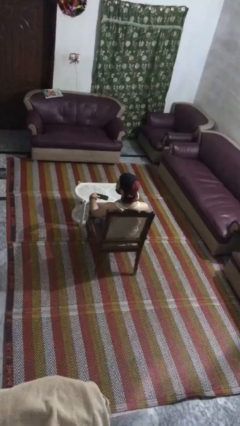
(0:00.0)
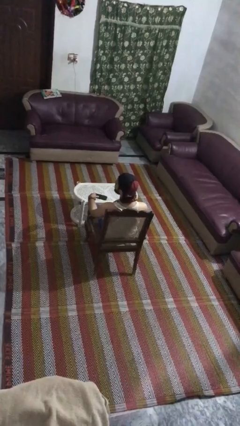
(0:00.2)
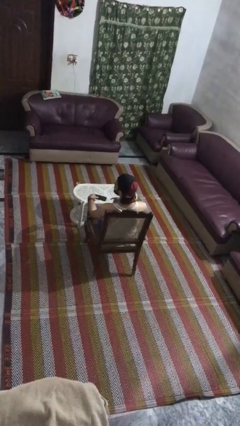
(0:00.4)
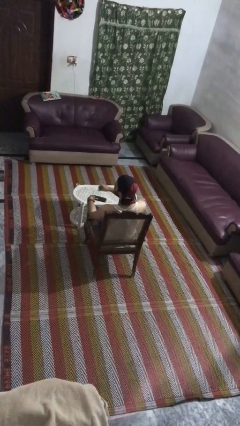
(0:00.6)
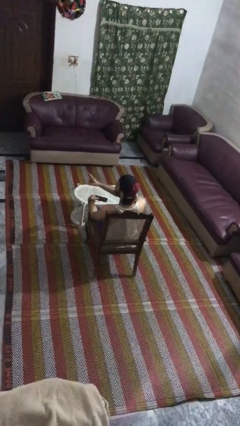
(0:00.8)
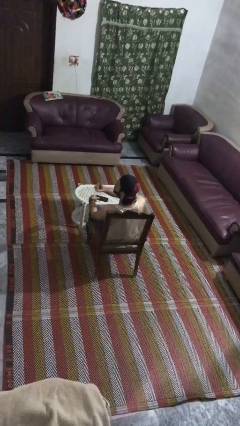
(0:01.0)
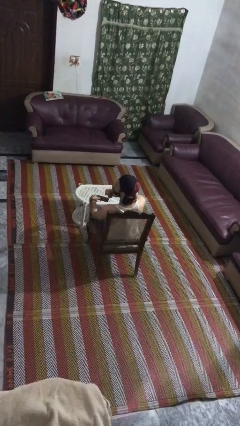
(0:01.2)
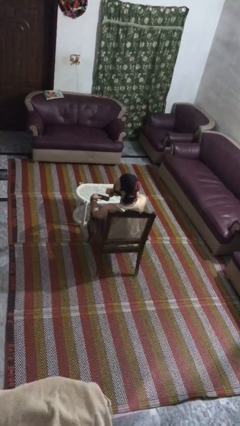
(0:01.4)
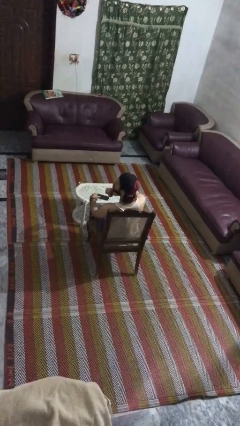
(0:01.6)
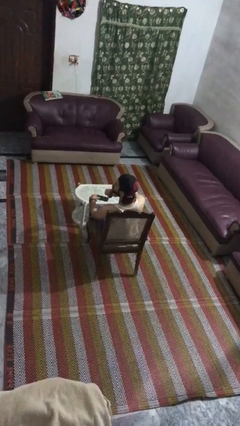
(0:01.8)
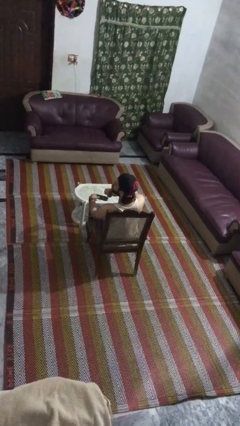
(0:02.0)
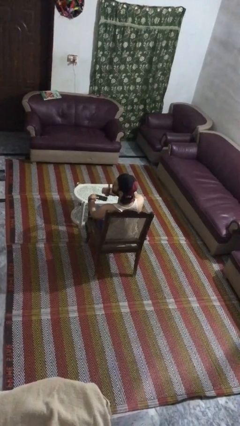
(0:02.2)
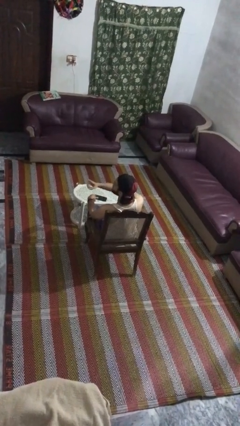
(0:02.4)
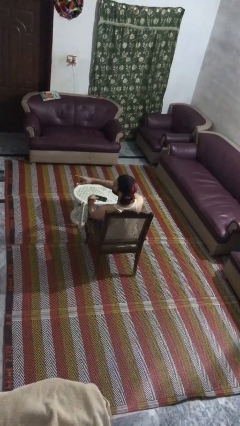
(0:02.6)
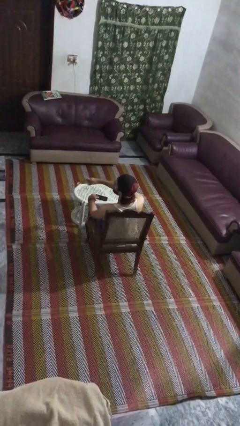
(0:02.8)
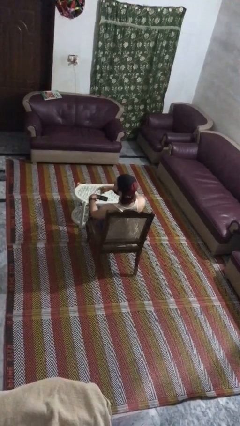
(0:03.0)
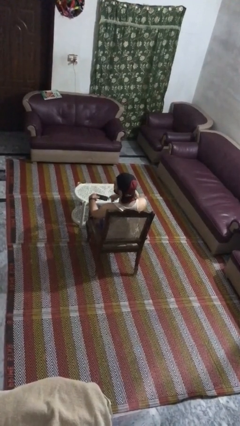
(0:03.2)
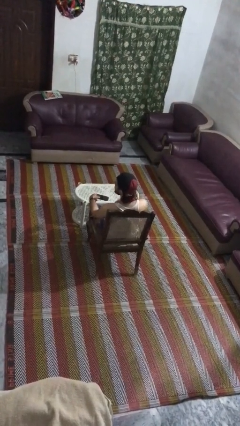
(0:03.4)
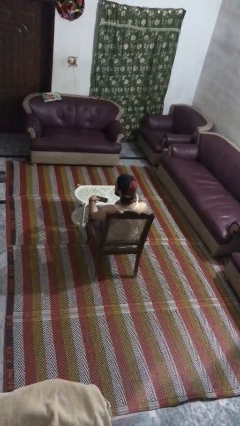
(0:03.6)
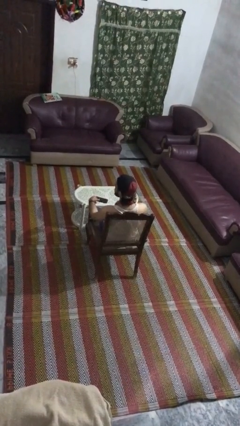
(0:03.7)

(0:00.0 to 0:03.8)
person gestures be quiet

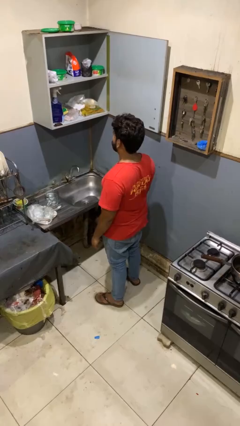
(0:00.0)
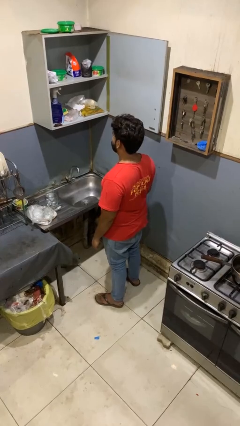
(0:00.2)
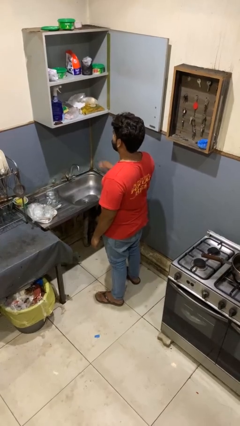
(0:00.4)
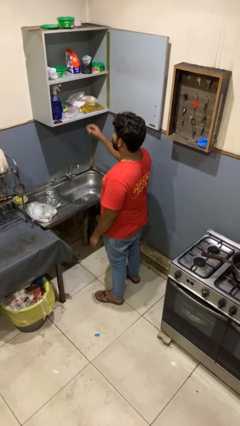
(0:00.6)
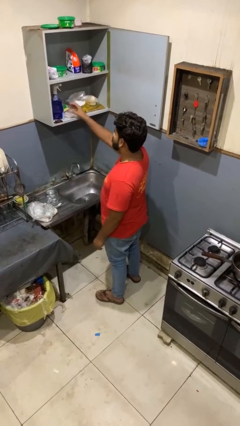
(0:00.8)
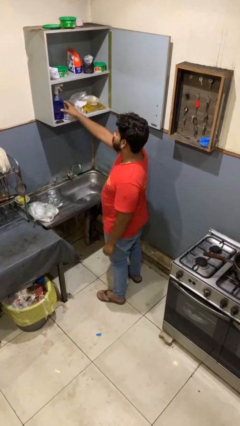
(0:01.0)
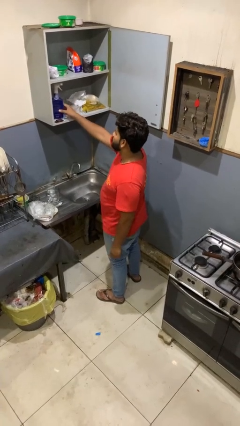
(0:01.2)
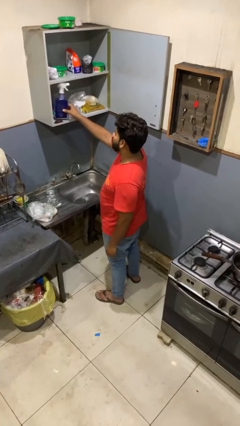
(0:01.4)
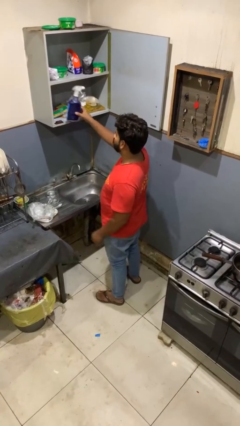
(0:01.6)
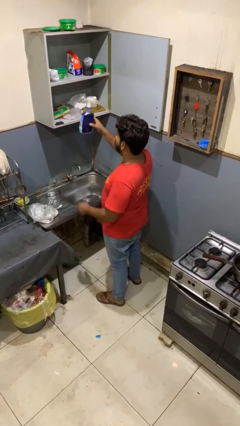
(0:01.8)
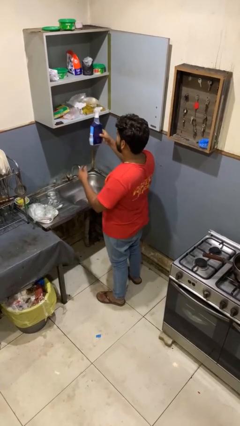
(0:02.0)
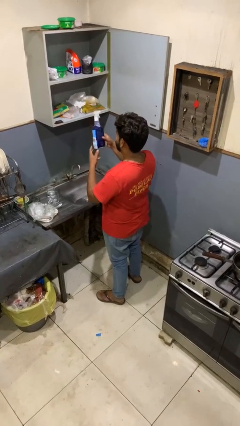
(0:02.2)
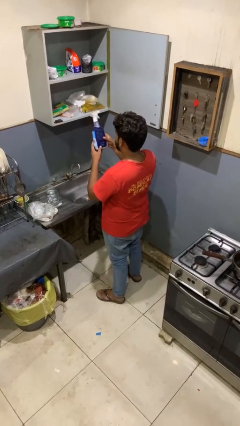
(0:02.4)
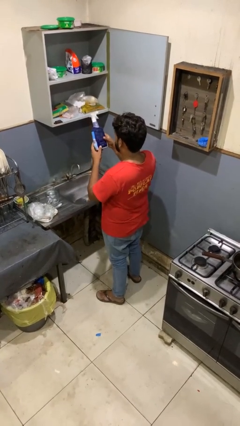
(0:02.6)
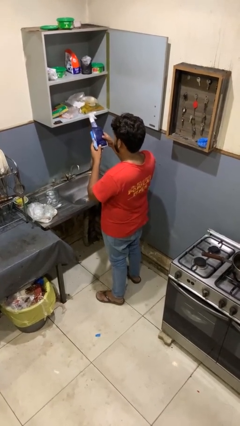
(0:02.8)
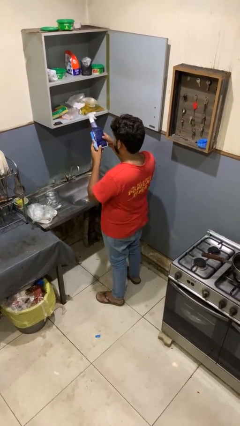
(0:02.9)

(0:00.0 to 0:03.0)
person picks up object from cabinet

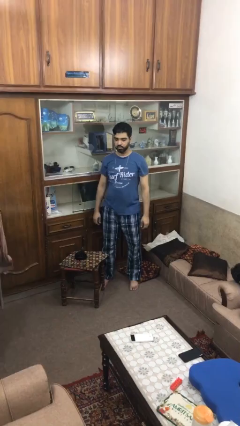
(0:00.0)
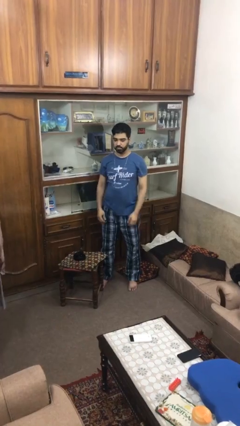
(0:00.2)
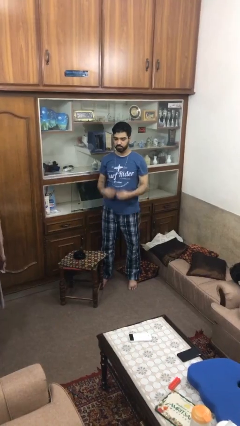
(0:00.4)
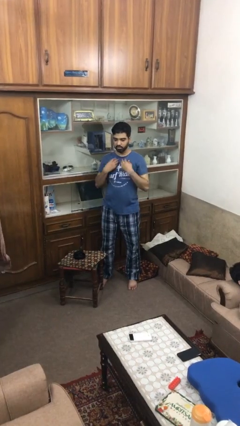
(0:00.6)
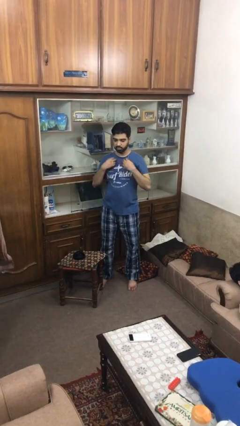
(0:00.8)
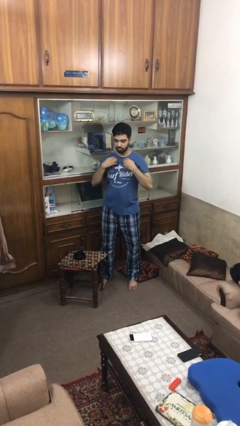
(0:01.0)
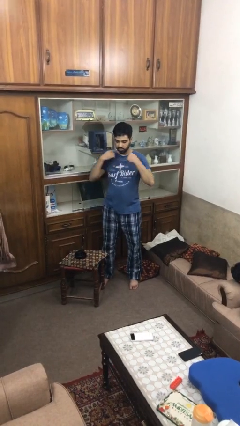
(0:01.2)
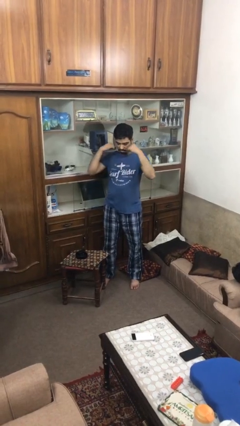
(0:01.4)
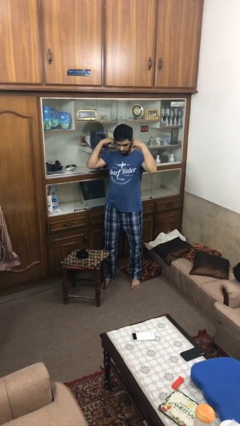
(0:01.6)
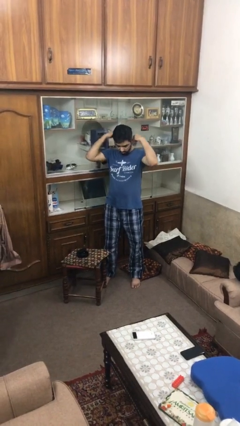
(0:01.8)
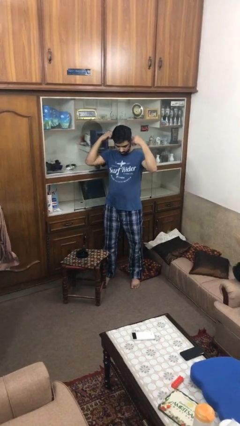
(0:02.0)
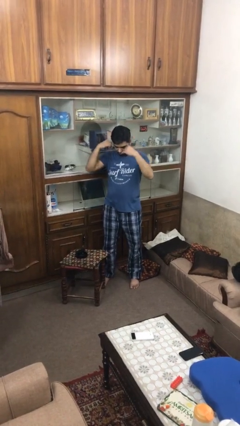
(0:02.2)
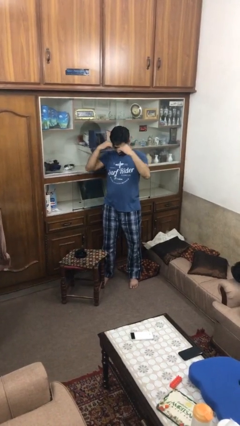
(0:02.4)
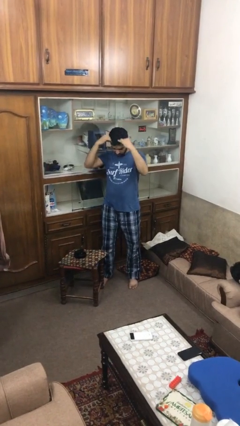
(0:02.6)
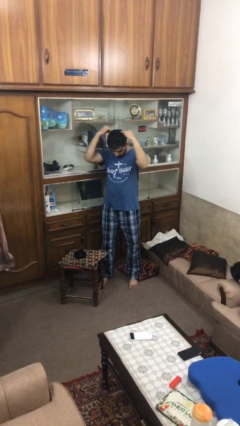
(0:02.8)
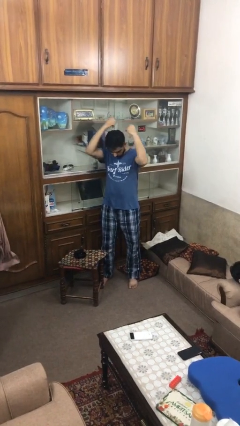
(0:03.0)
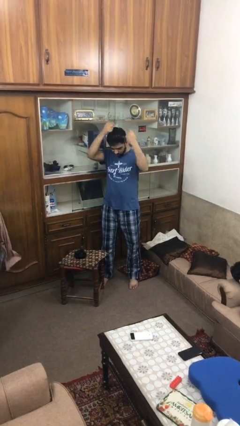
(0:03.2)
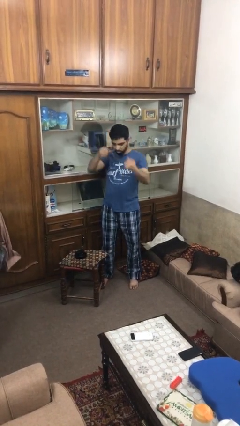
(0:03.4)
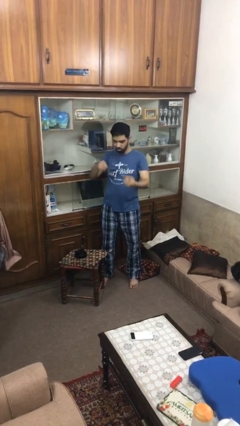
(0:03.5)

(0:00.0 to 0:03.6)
person takes off necklace

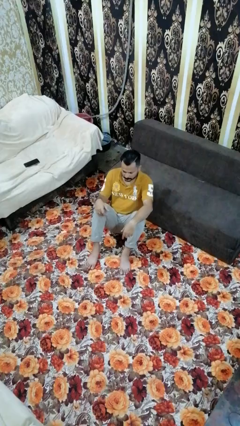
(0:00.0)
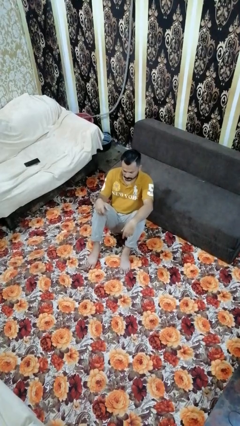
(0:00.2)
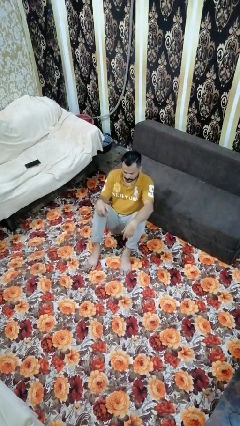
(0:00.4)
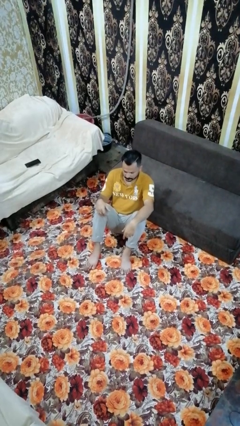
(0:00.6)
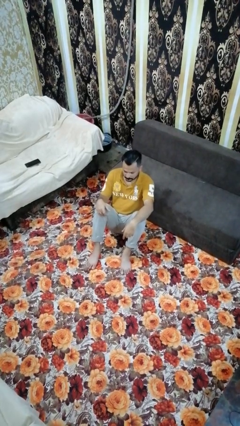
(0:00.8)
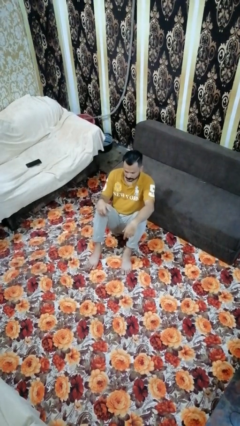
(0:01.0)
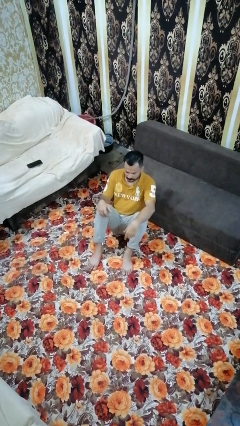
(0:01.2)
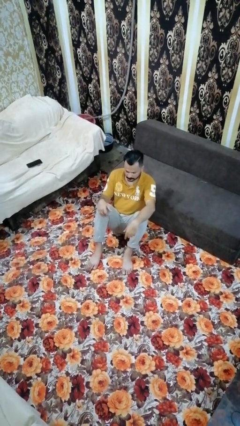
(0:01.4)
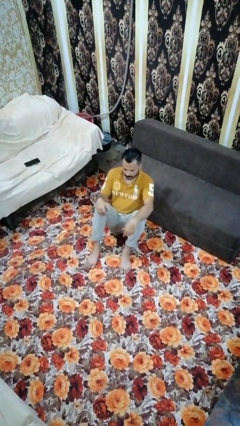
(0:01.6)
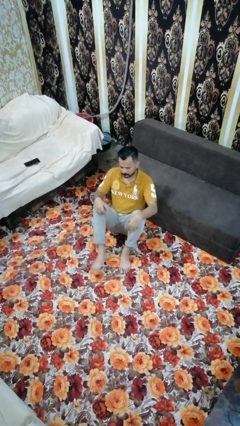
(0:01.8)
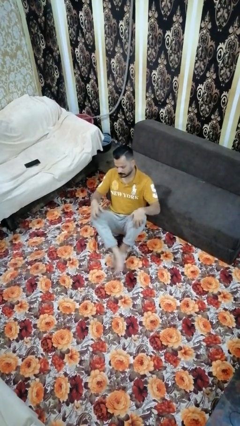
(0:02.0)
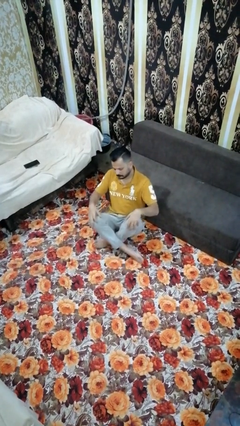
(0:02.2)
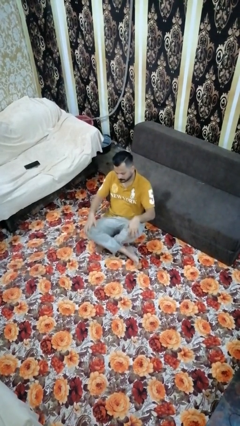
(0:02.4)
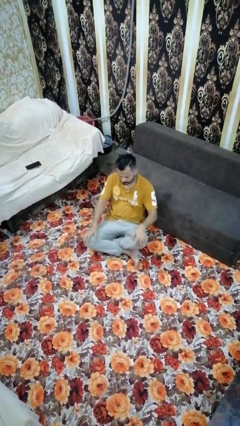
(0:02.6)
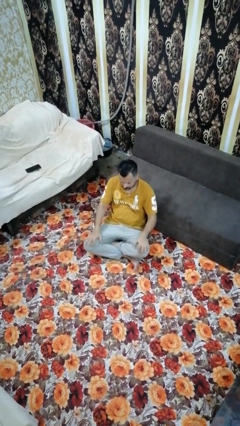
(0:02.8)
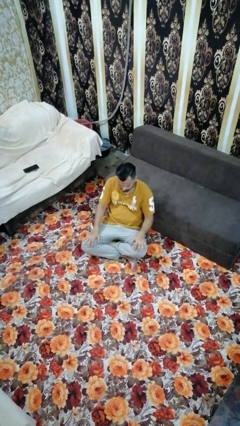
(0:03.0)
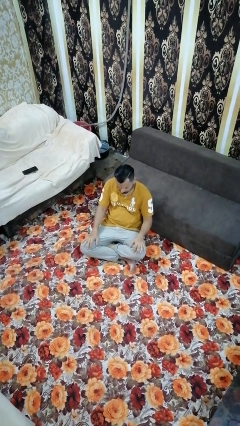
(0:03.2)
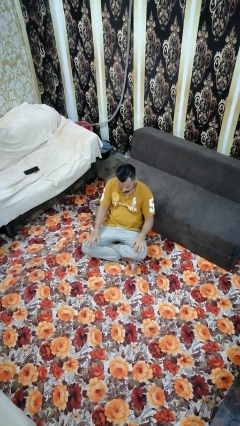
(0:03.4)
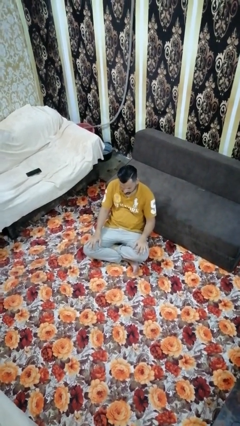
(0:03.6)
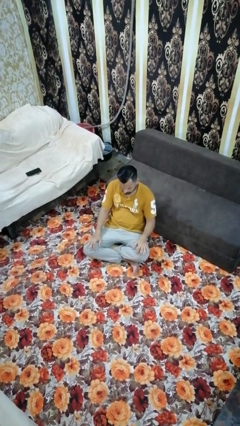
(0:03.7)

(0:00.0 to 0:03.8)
person crosses legs

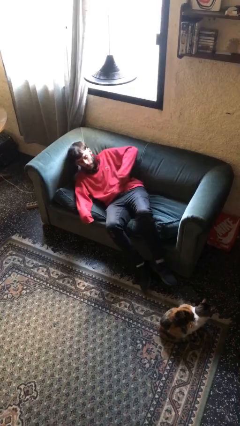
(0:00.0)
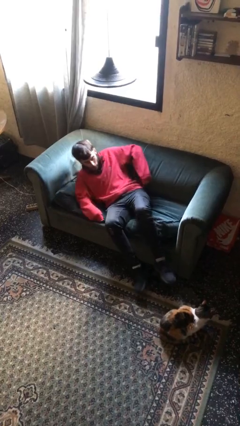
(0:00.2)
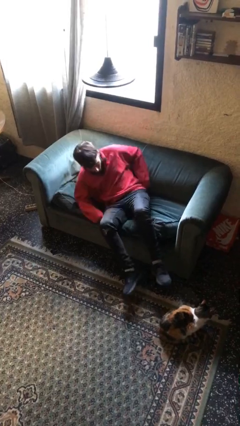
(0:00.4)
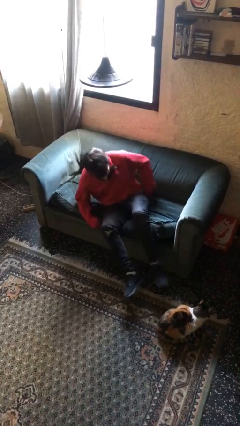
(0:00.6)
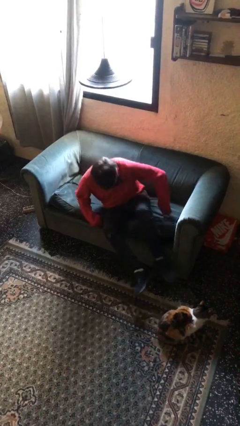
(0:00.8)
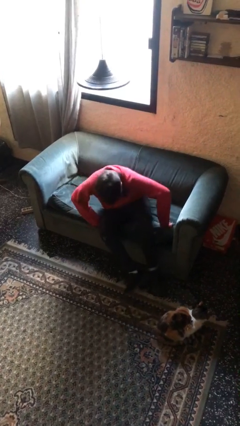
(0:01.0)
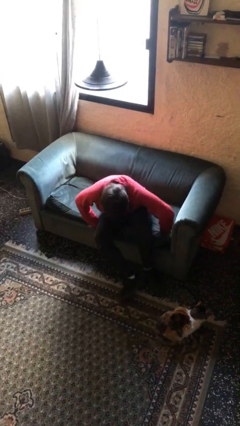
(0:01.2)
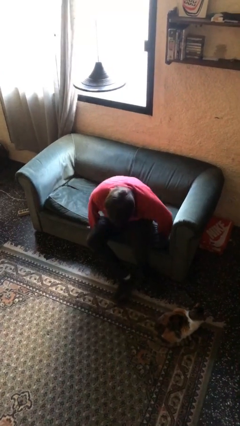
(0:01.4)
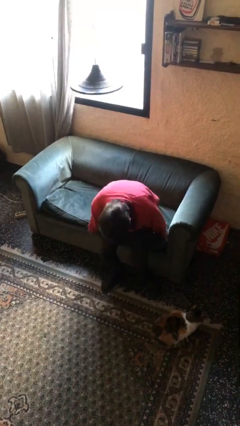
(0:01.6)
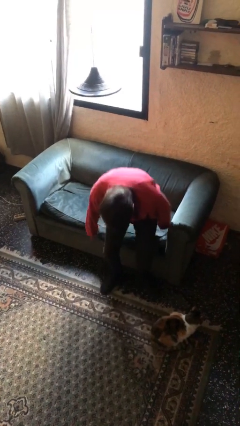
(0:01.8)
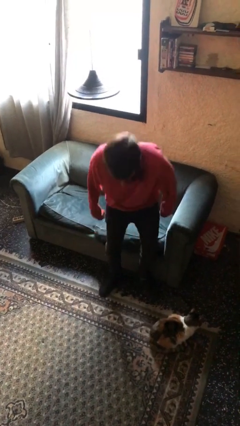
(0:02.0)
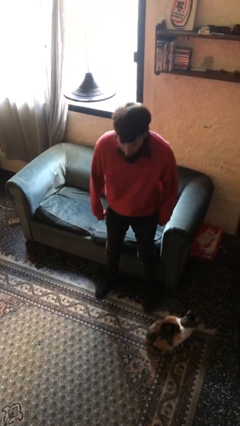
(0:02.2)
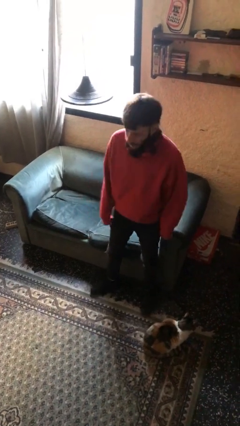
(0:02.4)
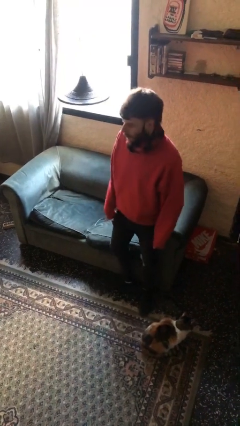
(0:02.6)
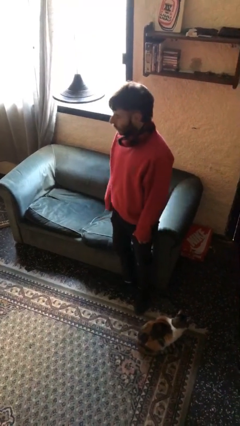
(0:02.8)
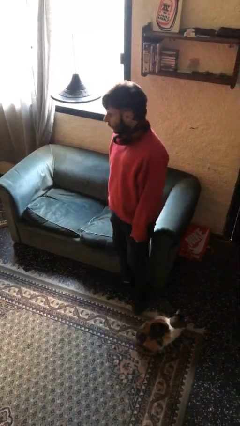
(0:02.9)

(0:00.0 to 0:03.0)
person stands up

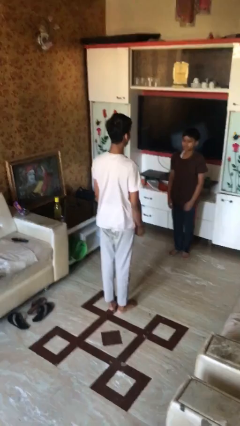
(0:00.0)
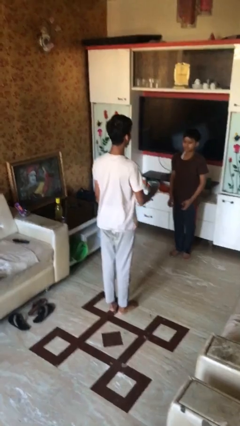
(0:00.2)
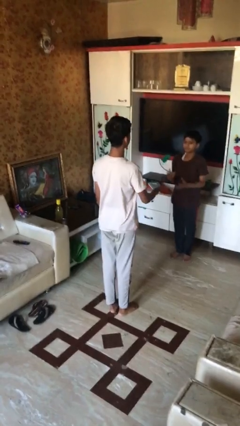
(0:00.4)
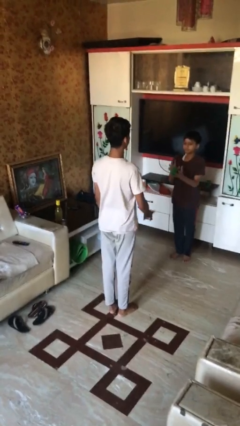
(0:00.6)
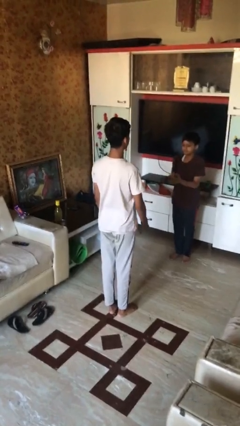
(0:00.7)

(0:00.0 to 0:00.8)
person throws object to person
